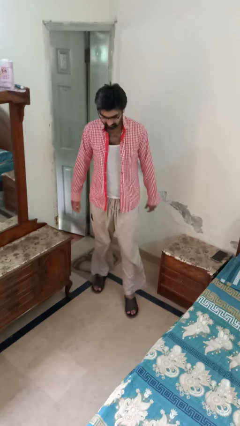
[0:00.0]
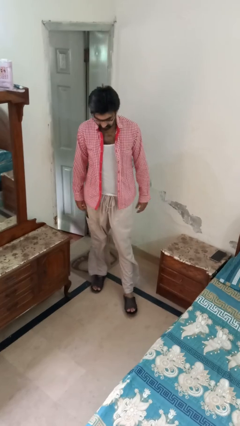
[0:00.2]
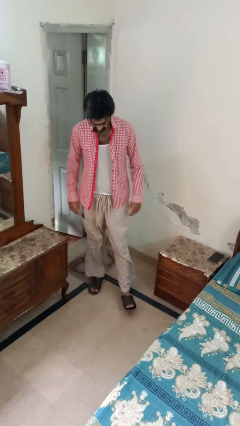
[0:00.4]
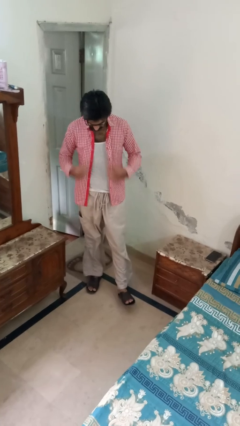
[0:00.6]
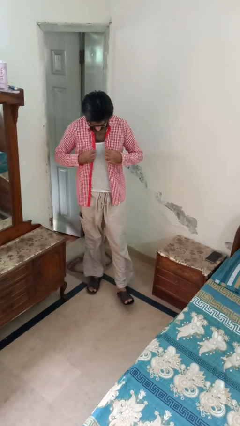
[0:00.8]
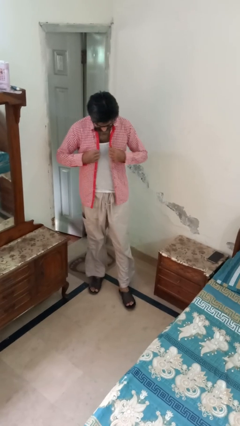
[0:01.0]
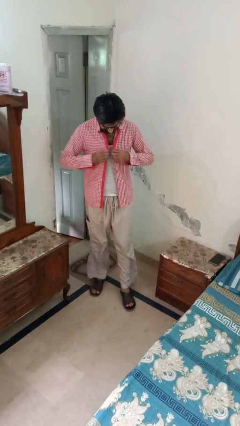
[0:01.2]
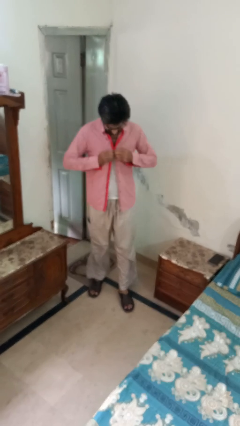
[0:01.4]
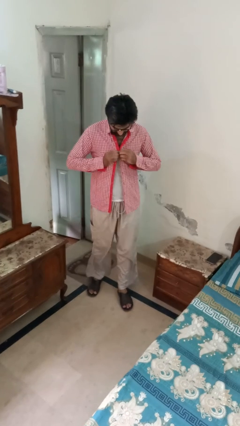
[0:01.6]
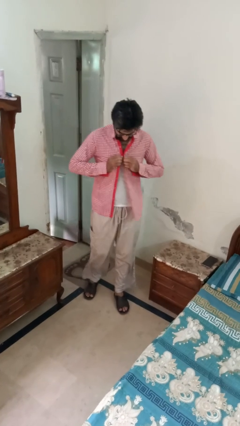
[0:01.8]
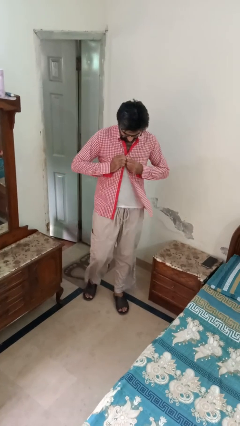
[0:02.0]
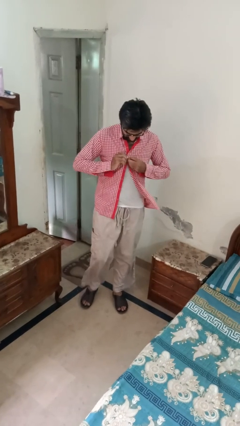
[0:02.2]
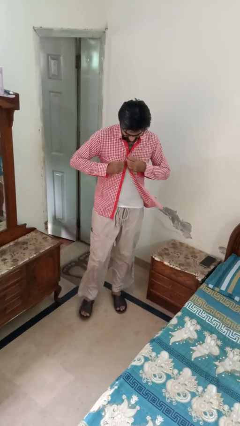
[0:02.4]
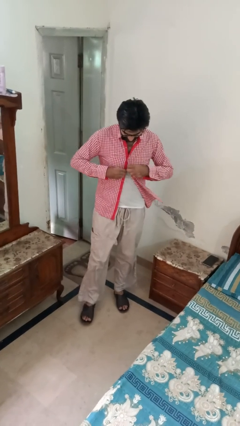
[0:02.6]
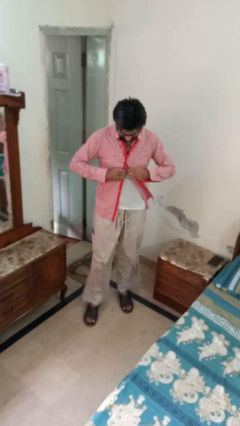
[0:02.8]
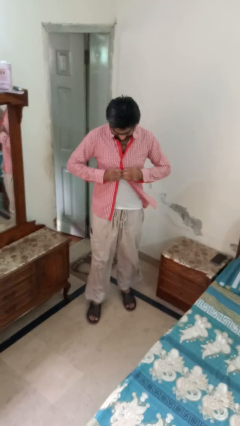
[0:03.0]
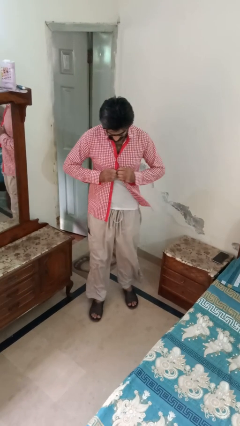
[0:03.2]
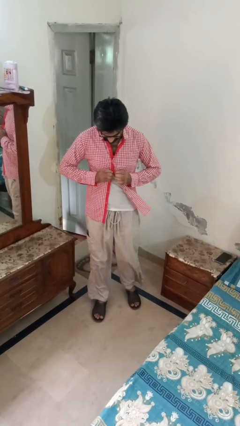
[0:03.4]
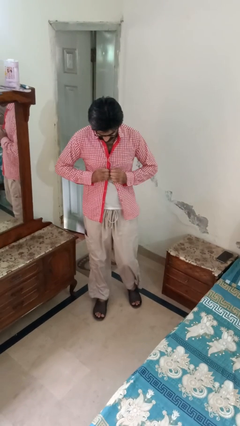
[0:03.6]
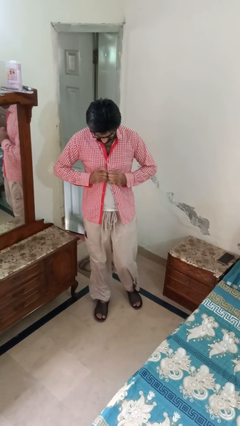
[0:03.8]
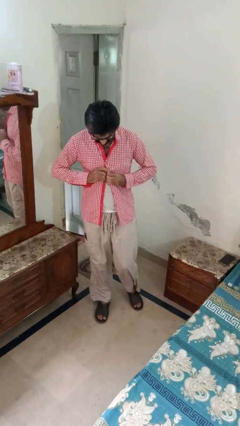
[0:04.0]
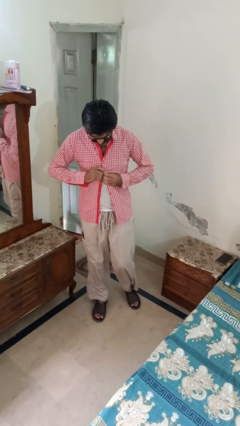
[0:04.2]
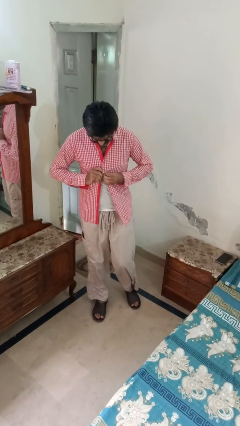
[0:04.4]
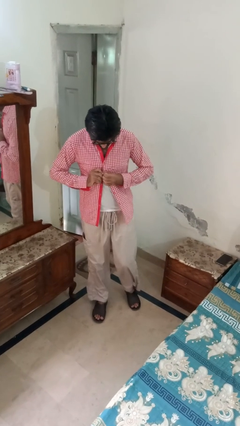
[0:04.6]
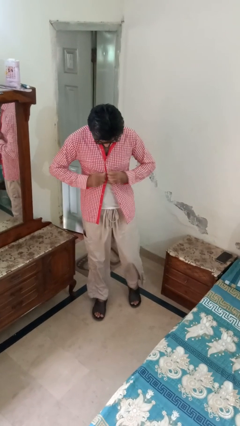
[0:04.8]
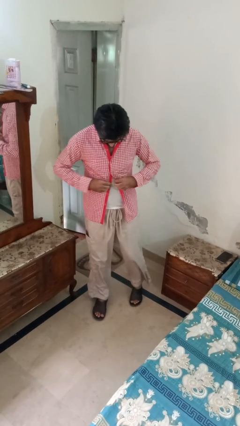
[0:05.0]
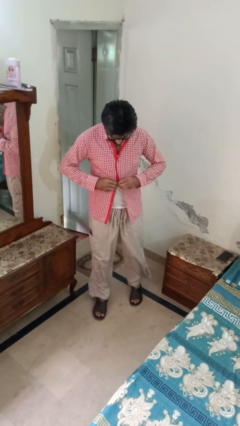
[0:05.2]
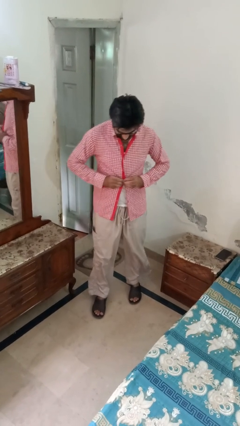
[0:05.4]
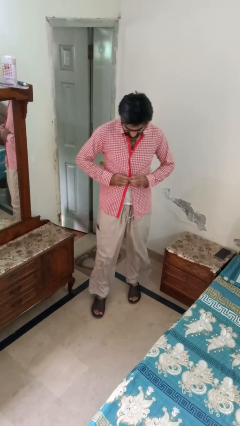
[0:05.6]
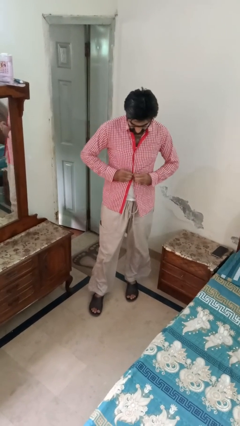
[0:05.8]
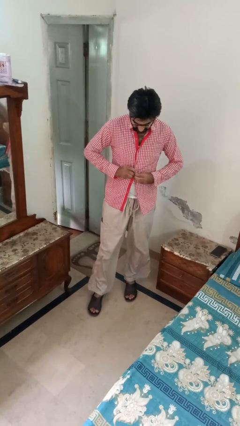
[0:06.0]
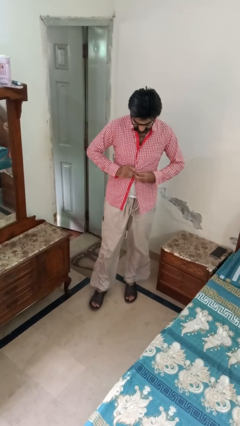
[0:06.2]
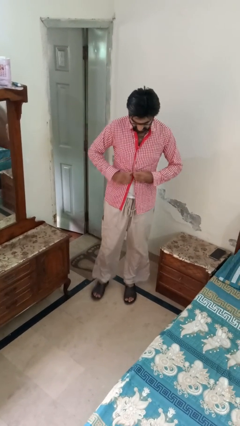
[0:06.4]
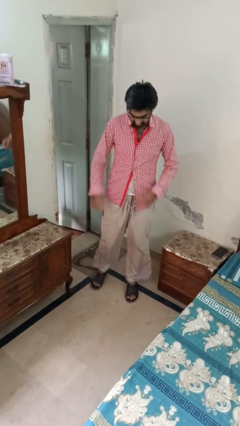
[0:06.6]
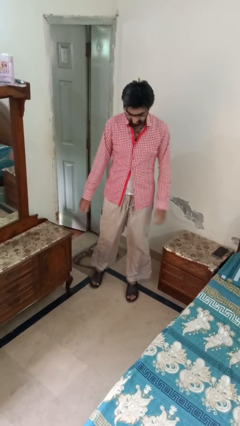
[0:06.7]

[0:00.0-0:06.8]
person buttons shirt

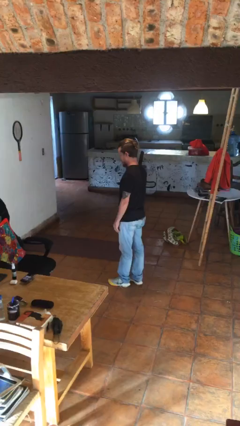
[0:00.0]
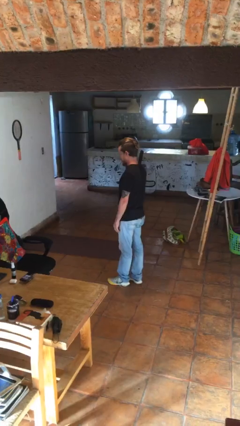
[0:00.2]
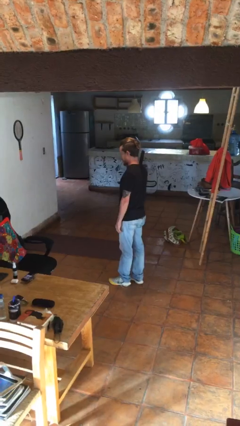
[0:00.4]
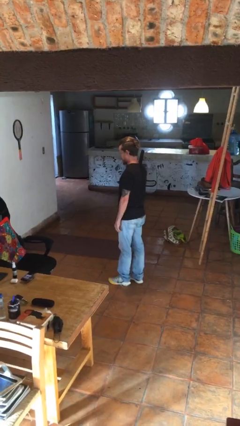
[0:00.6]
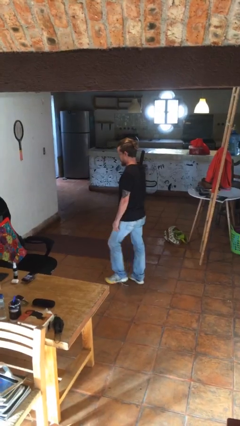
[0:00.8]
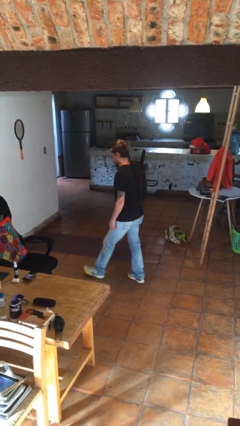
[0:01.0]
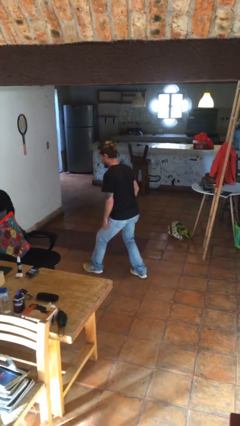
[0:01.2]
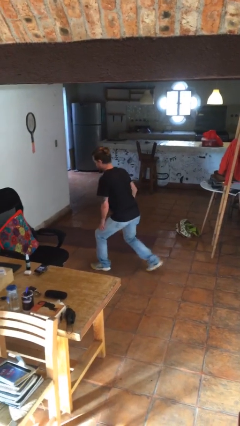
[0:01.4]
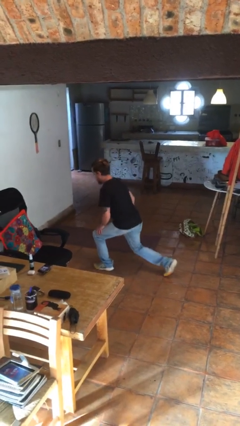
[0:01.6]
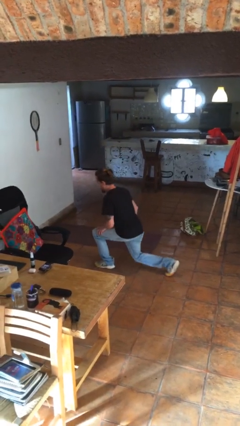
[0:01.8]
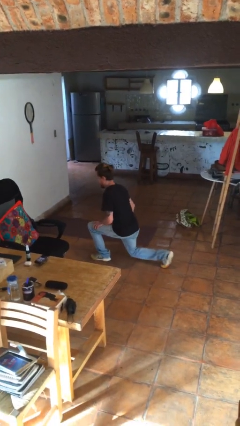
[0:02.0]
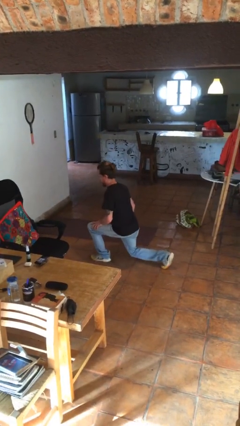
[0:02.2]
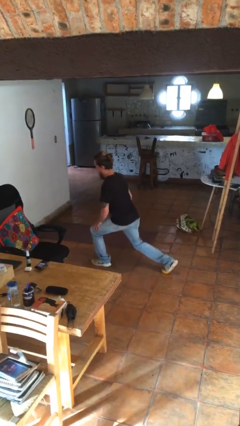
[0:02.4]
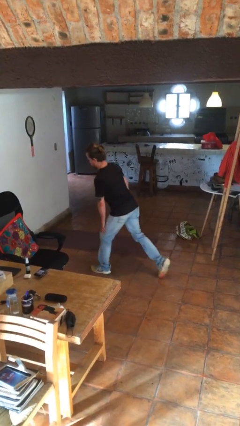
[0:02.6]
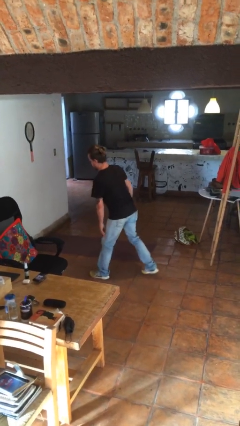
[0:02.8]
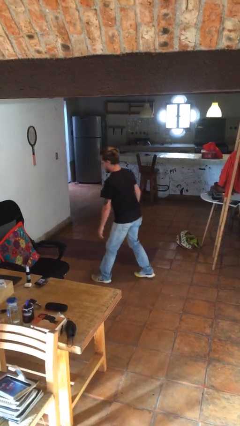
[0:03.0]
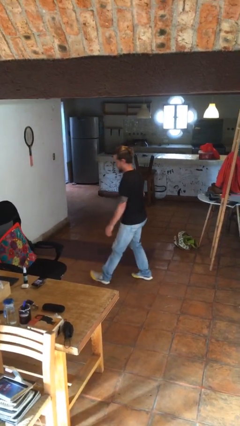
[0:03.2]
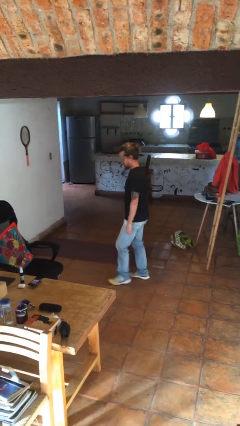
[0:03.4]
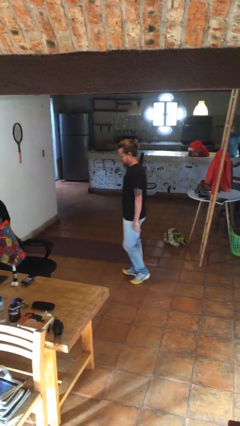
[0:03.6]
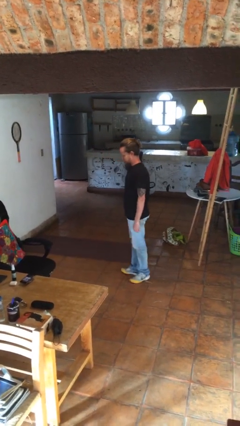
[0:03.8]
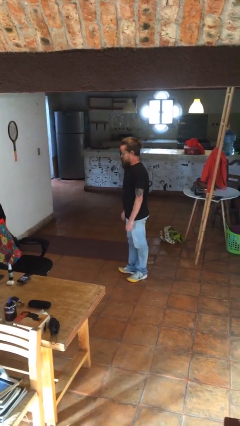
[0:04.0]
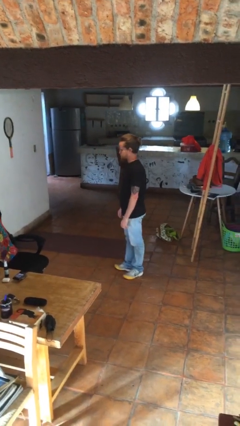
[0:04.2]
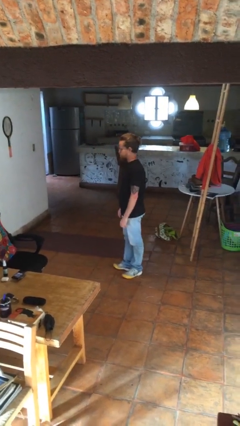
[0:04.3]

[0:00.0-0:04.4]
person exercises with lunges

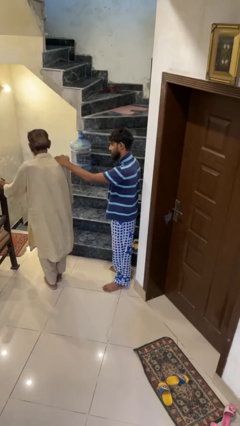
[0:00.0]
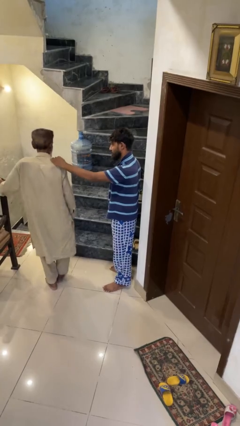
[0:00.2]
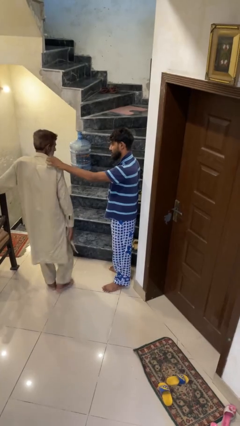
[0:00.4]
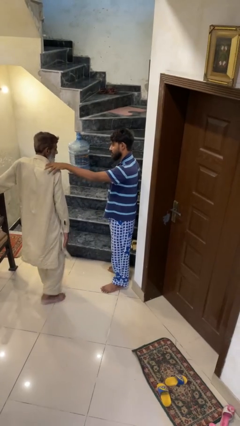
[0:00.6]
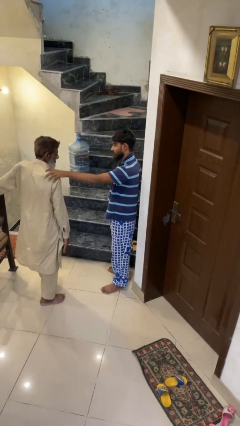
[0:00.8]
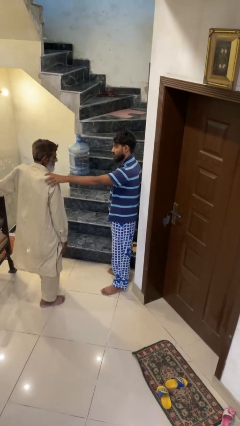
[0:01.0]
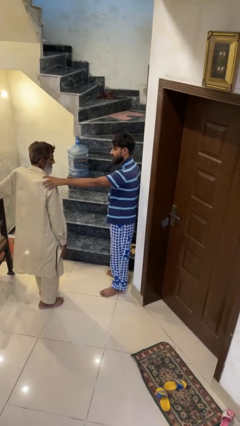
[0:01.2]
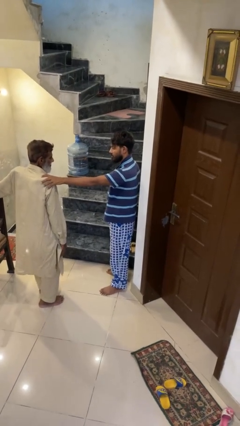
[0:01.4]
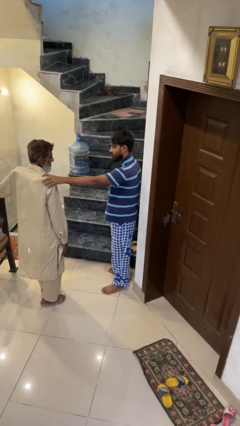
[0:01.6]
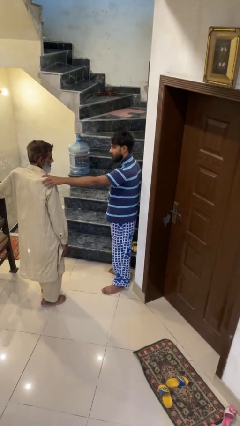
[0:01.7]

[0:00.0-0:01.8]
person spins person around

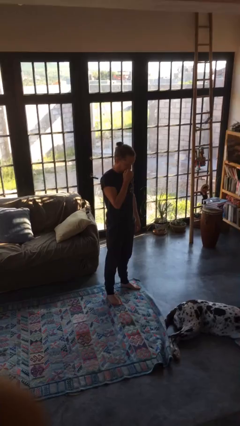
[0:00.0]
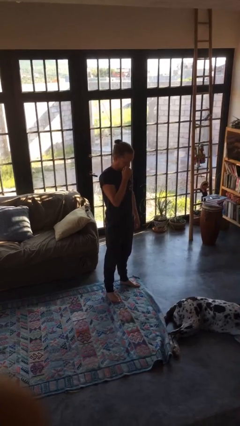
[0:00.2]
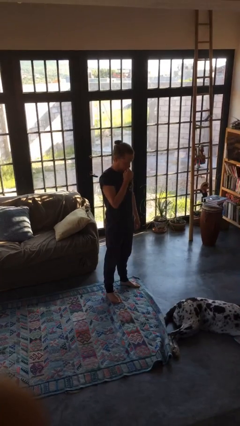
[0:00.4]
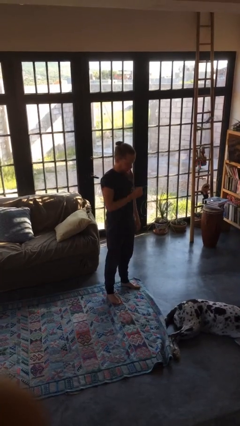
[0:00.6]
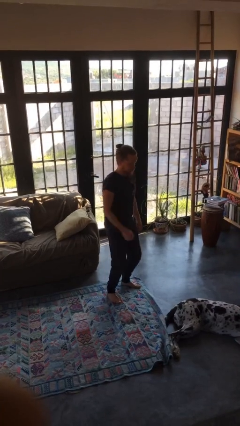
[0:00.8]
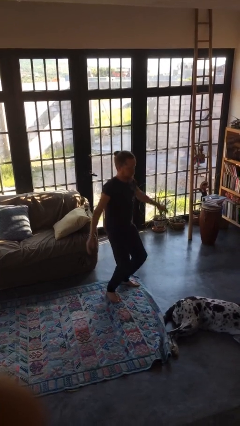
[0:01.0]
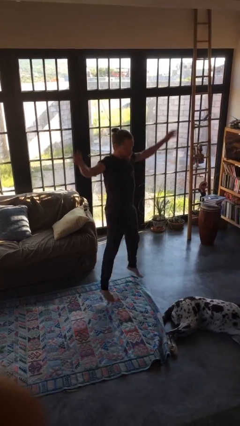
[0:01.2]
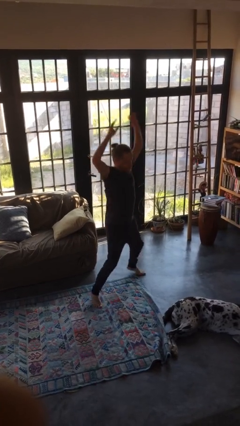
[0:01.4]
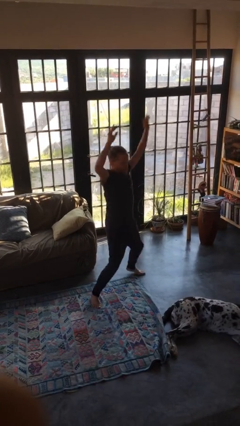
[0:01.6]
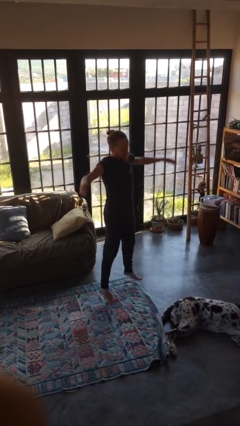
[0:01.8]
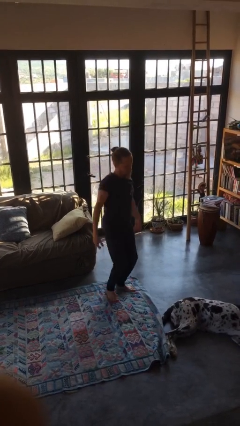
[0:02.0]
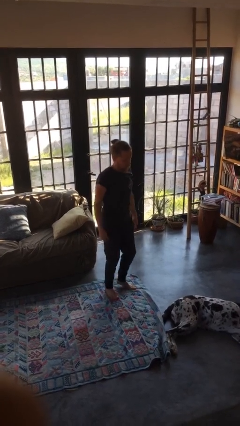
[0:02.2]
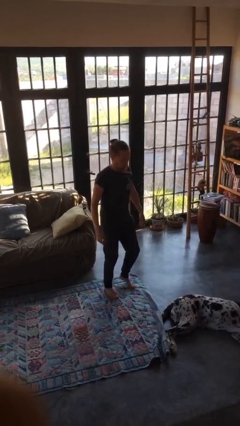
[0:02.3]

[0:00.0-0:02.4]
person exercises with jumping jacks

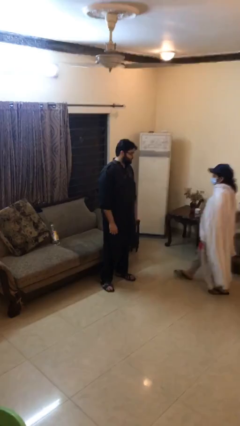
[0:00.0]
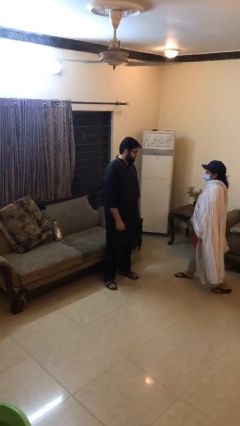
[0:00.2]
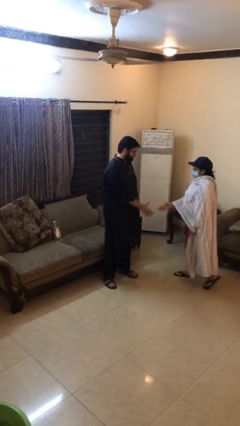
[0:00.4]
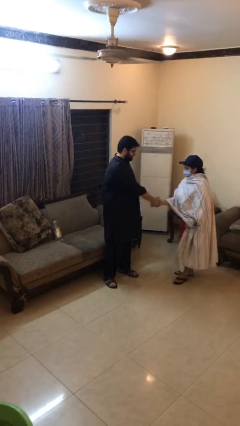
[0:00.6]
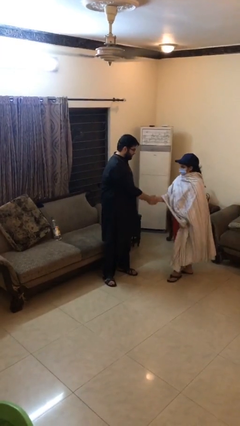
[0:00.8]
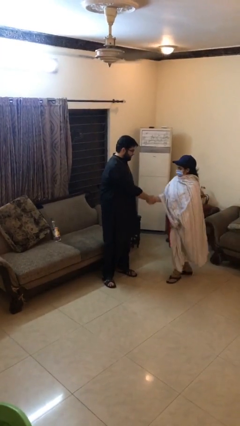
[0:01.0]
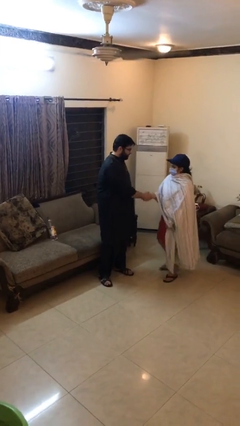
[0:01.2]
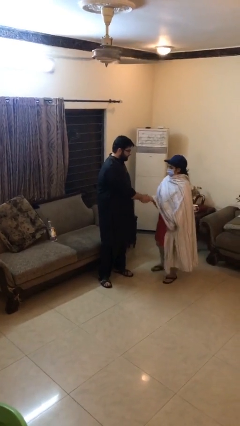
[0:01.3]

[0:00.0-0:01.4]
person shakes hand

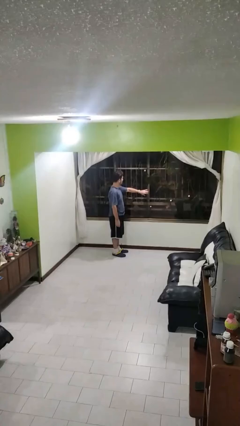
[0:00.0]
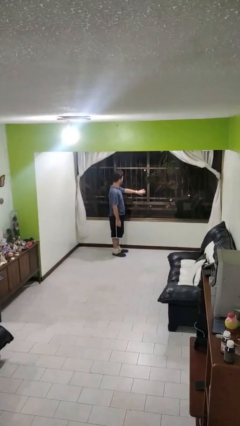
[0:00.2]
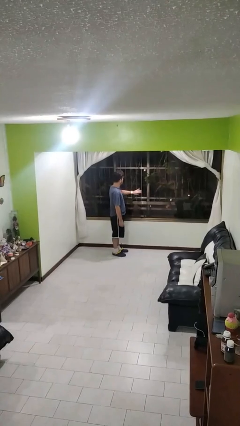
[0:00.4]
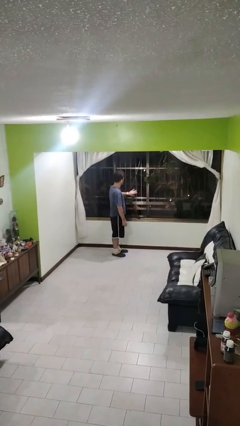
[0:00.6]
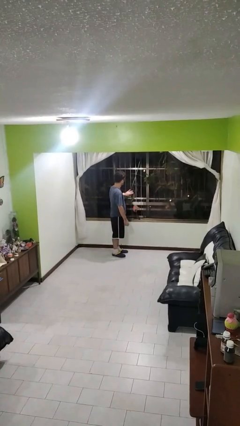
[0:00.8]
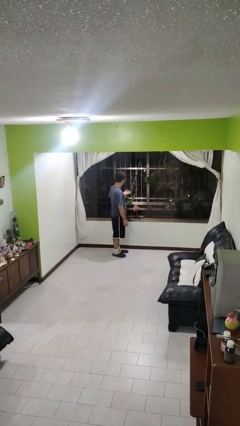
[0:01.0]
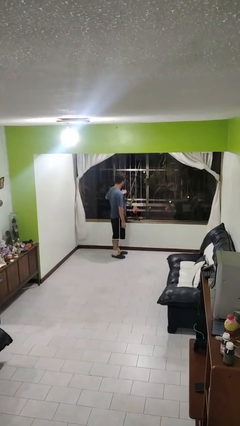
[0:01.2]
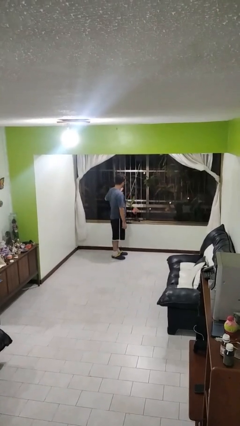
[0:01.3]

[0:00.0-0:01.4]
person opens home window
